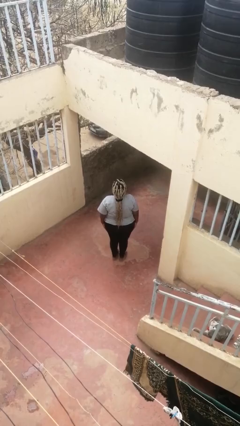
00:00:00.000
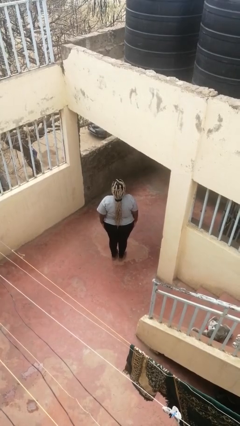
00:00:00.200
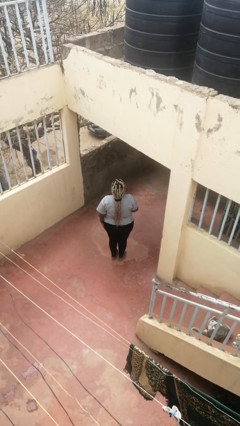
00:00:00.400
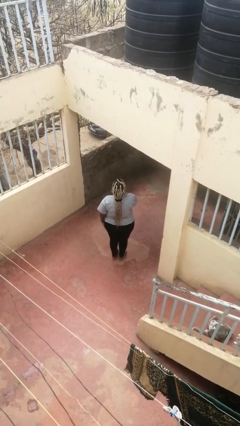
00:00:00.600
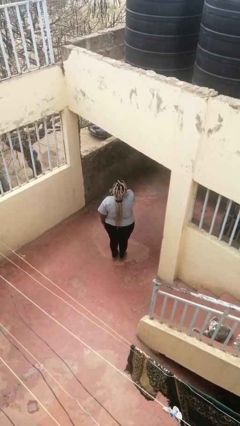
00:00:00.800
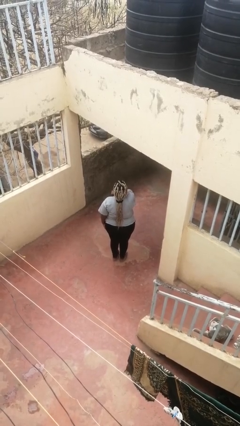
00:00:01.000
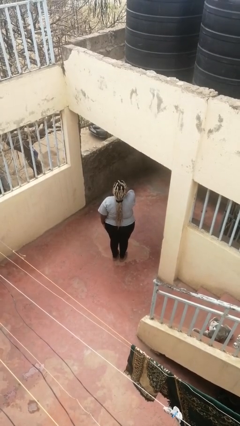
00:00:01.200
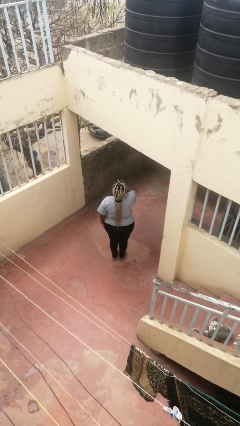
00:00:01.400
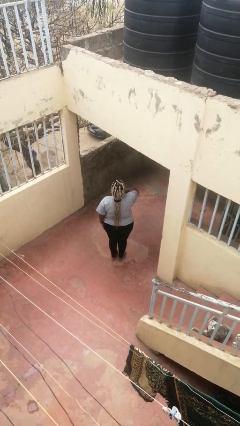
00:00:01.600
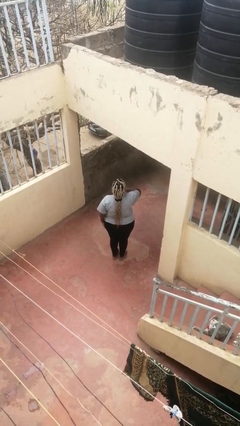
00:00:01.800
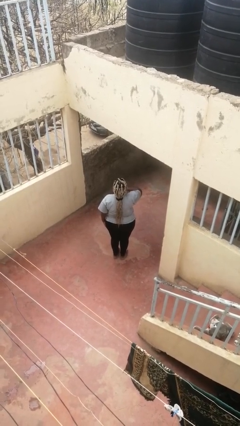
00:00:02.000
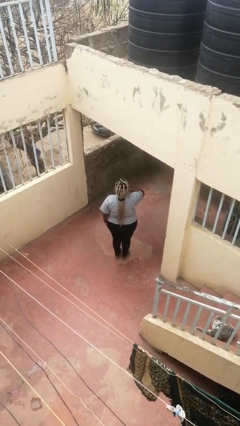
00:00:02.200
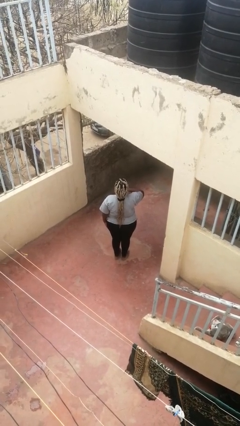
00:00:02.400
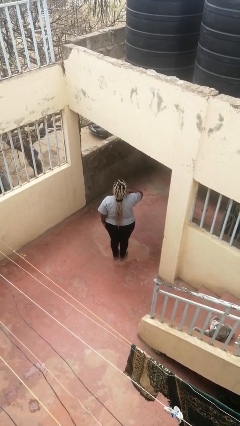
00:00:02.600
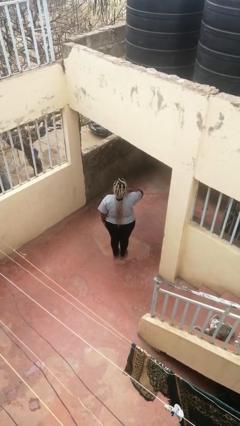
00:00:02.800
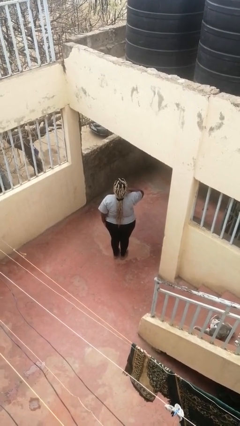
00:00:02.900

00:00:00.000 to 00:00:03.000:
person gestures cut

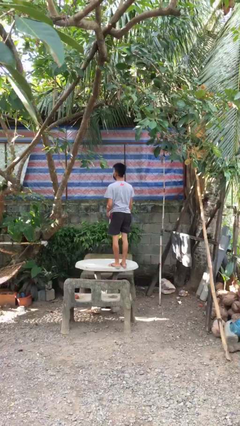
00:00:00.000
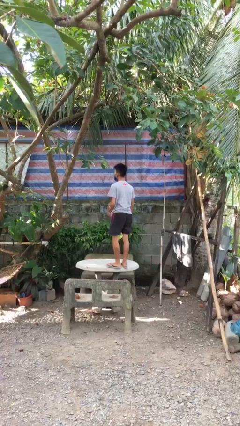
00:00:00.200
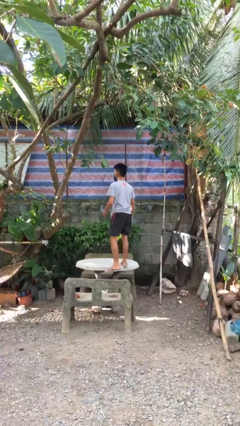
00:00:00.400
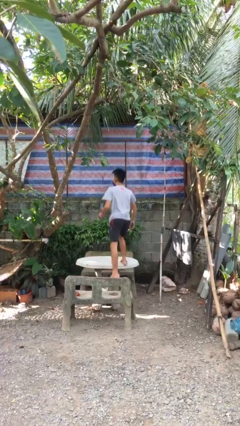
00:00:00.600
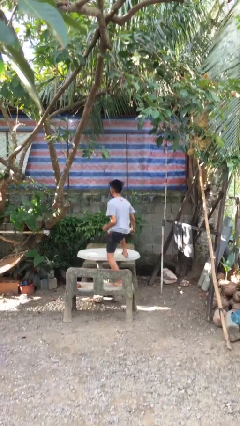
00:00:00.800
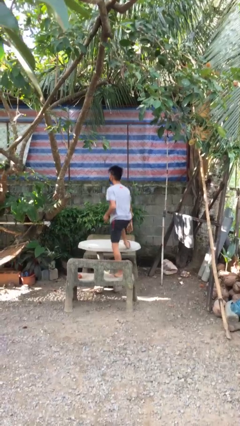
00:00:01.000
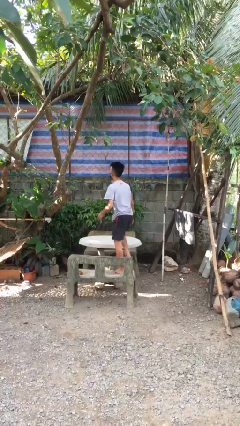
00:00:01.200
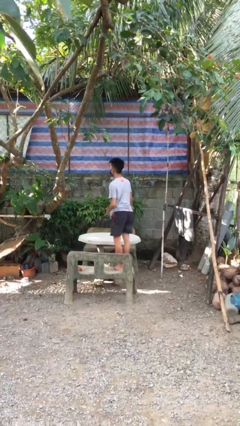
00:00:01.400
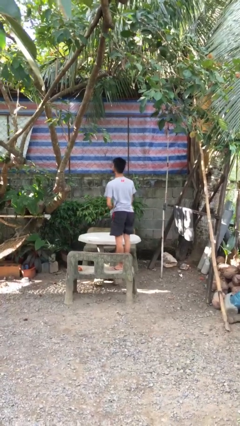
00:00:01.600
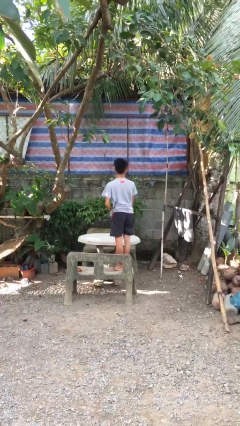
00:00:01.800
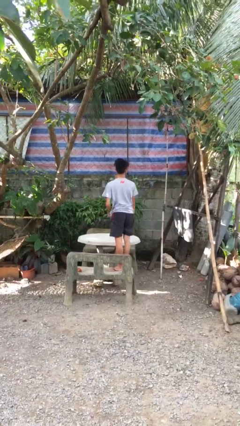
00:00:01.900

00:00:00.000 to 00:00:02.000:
person climbs off table

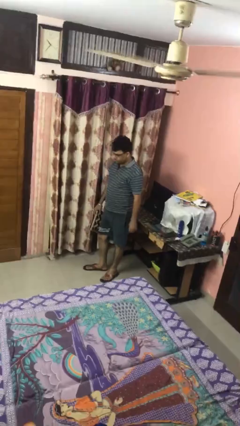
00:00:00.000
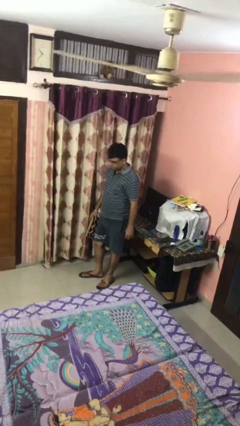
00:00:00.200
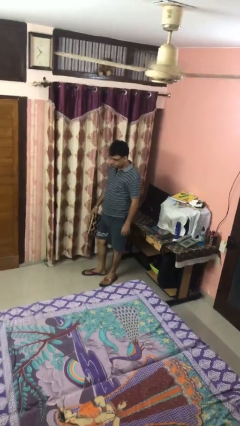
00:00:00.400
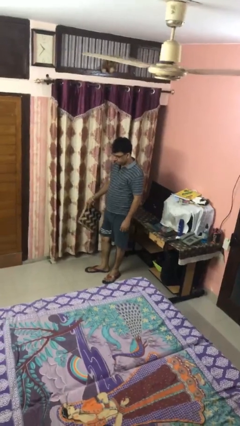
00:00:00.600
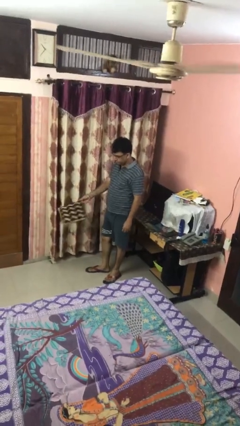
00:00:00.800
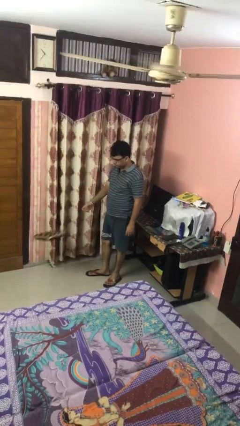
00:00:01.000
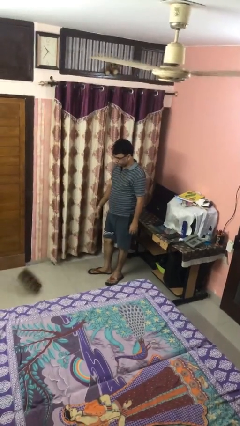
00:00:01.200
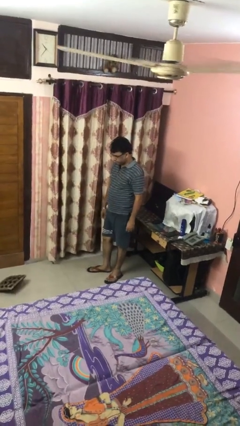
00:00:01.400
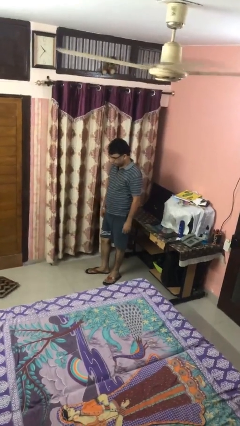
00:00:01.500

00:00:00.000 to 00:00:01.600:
person throws object to ground

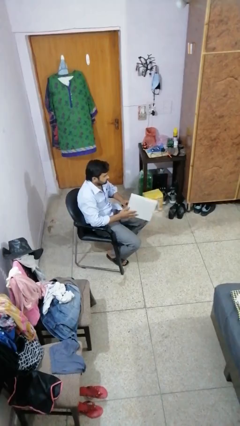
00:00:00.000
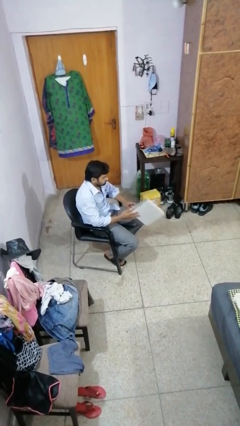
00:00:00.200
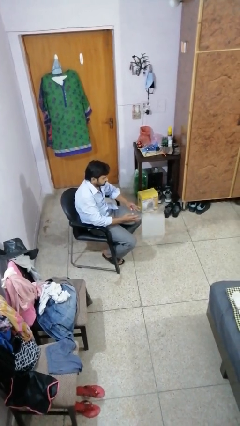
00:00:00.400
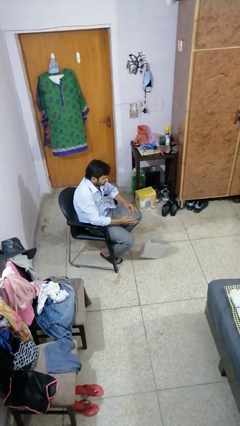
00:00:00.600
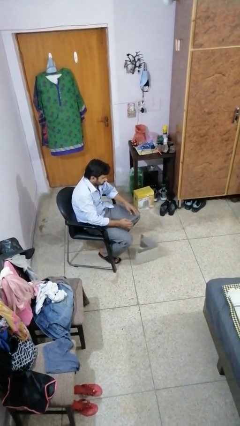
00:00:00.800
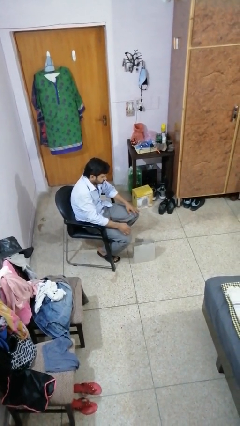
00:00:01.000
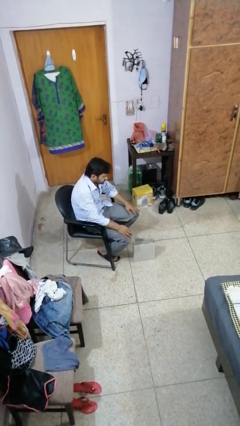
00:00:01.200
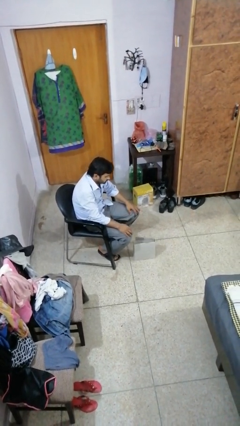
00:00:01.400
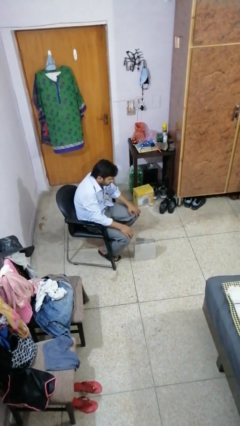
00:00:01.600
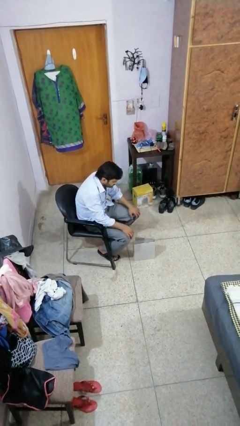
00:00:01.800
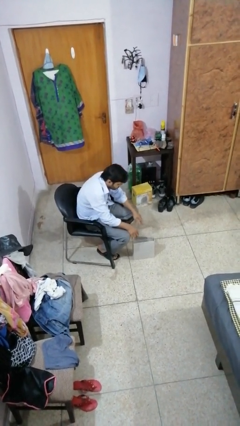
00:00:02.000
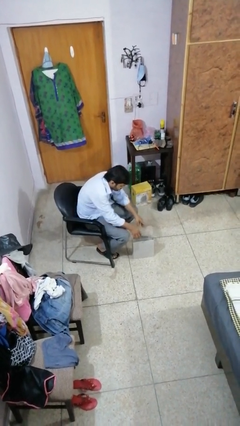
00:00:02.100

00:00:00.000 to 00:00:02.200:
person drops object

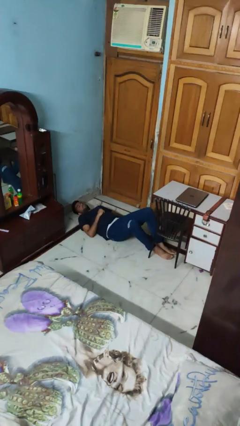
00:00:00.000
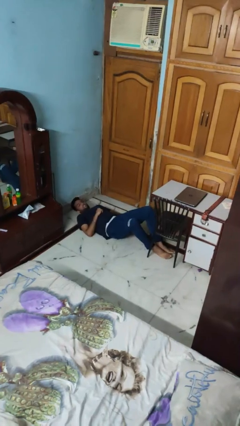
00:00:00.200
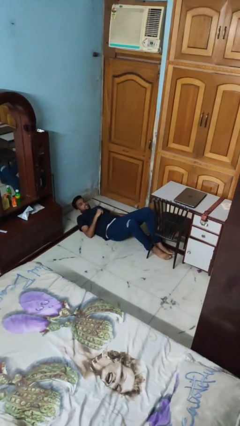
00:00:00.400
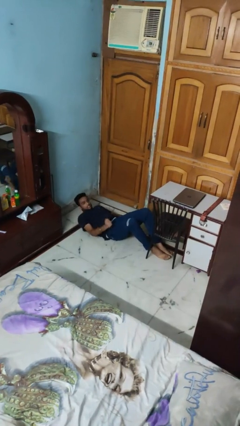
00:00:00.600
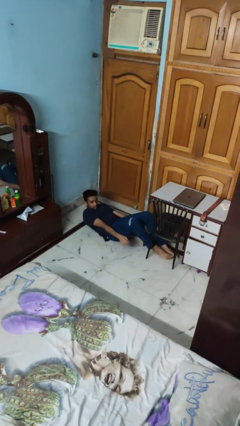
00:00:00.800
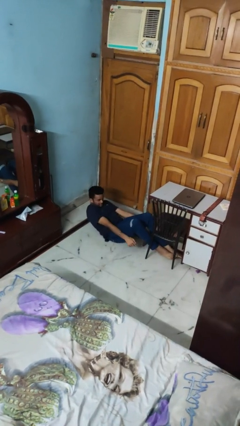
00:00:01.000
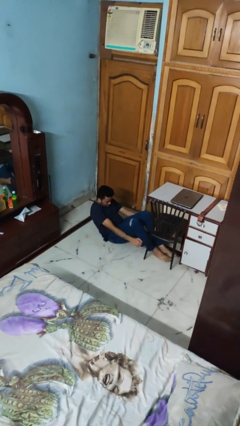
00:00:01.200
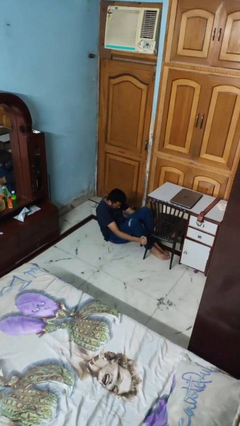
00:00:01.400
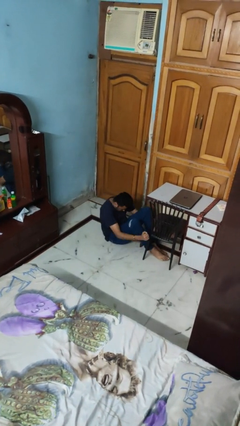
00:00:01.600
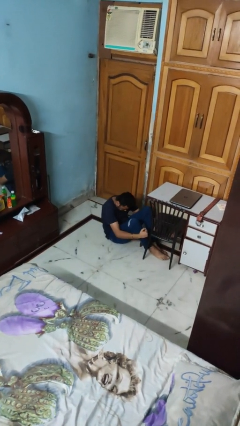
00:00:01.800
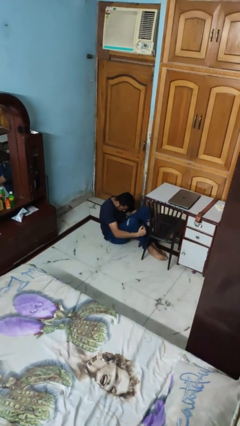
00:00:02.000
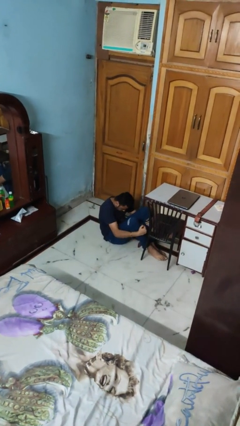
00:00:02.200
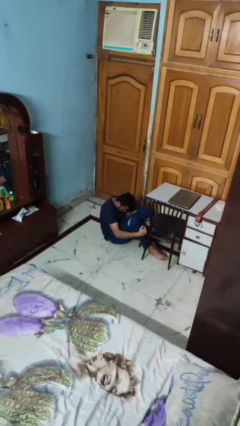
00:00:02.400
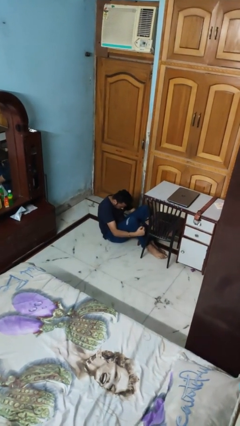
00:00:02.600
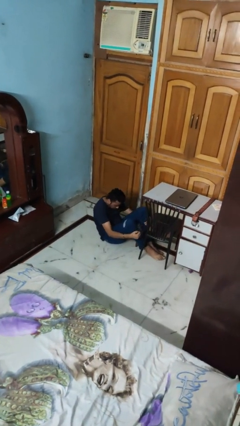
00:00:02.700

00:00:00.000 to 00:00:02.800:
person exercises with situp

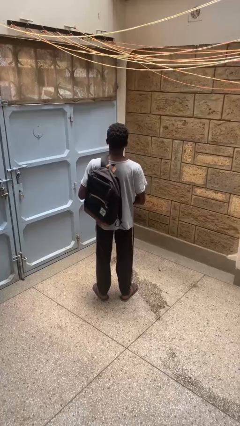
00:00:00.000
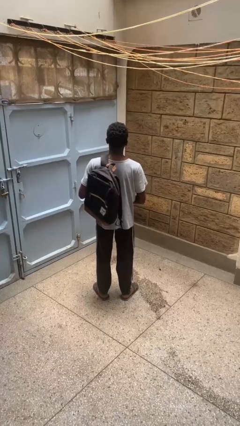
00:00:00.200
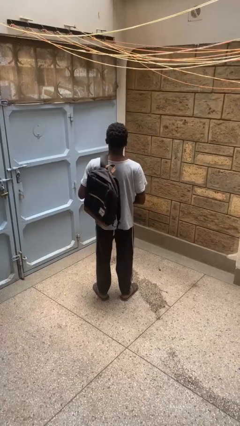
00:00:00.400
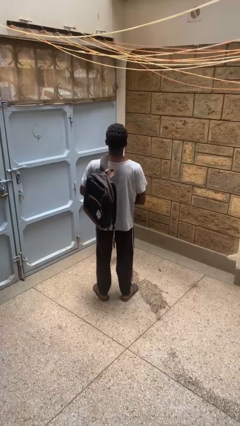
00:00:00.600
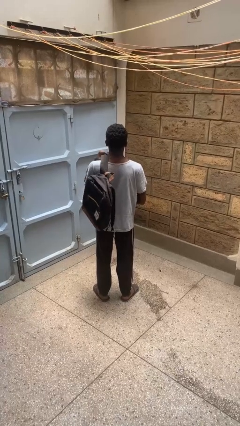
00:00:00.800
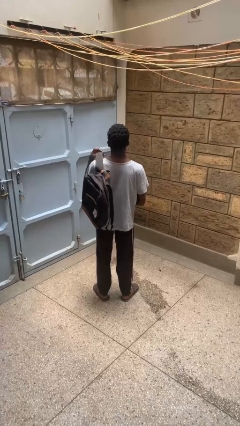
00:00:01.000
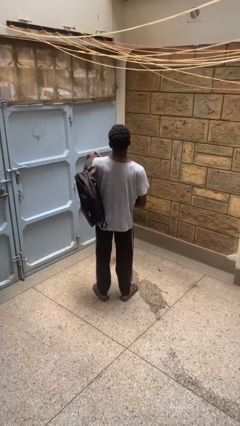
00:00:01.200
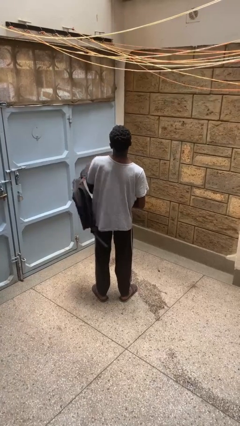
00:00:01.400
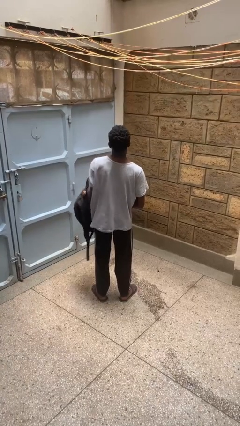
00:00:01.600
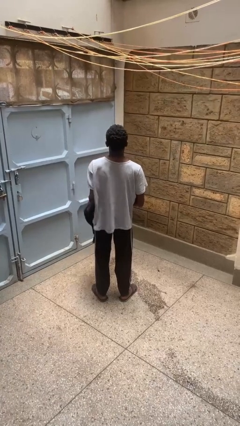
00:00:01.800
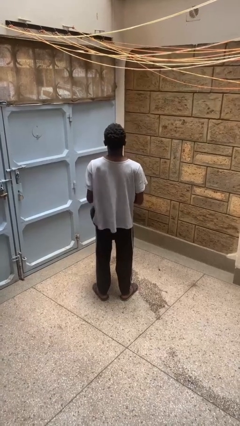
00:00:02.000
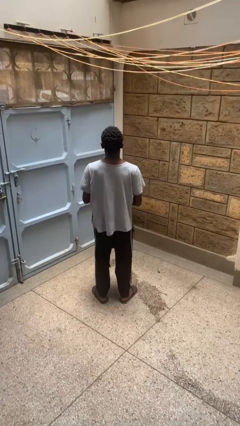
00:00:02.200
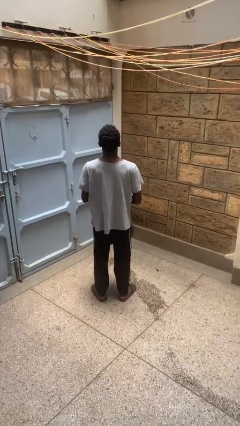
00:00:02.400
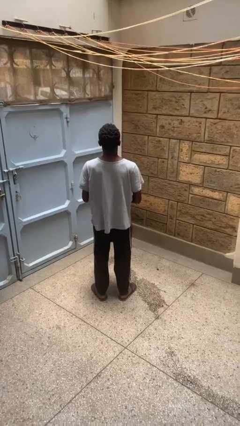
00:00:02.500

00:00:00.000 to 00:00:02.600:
person takes off backpack

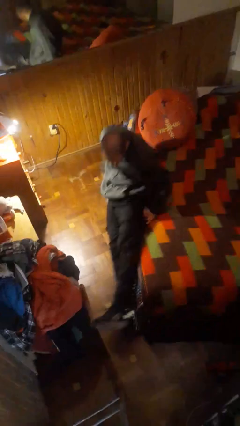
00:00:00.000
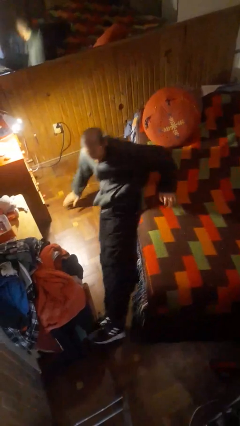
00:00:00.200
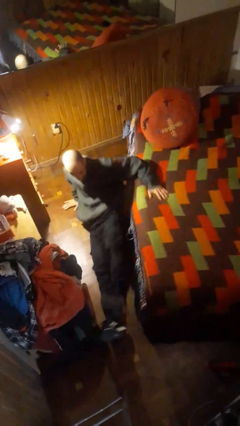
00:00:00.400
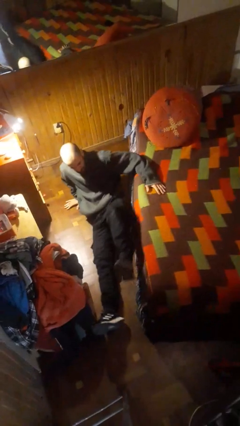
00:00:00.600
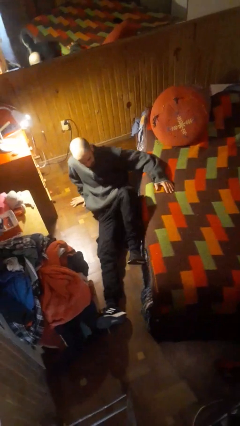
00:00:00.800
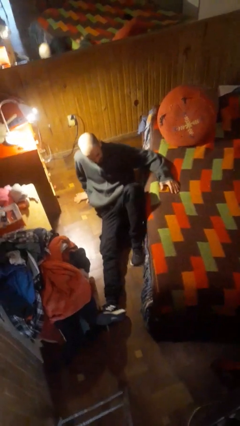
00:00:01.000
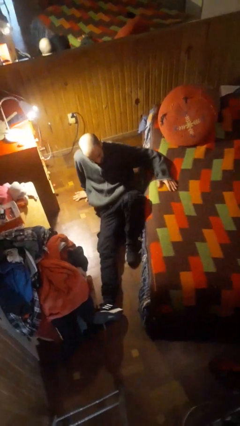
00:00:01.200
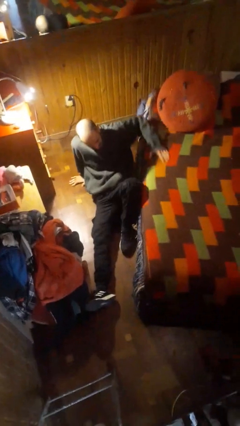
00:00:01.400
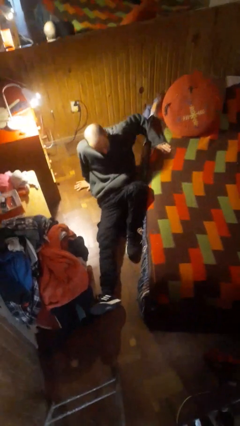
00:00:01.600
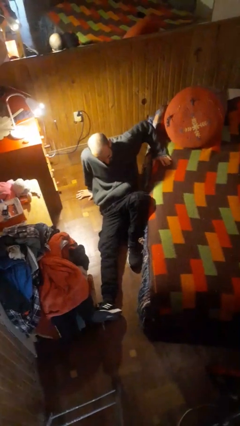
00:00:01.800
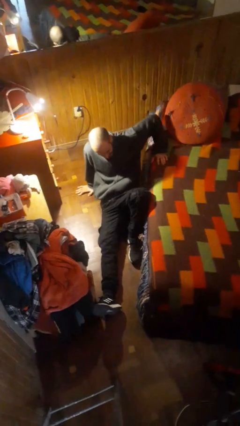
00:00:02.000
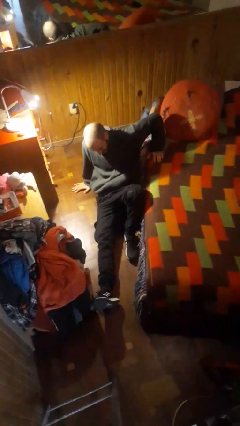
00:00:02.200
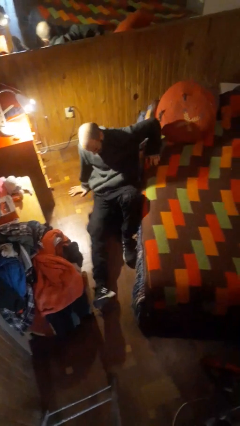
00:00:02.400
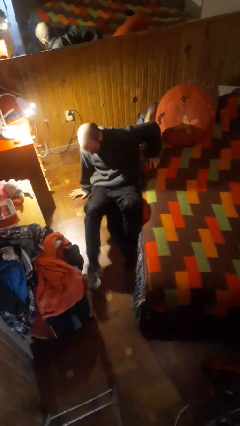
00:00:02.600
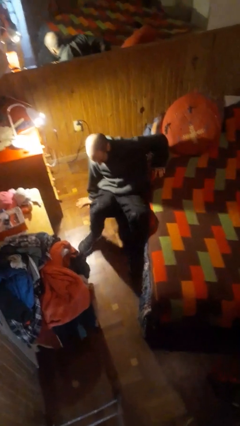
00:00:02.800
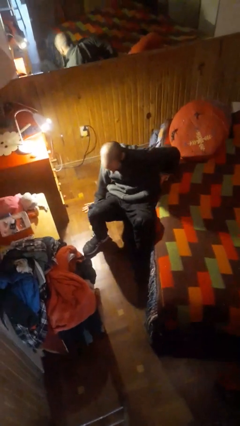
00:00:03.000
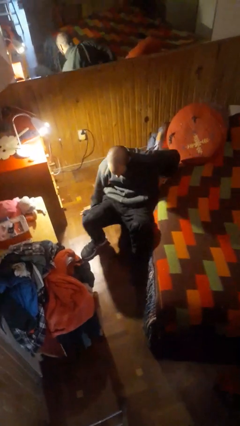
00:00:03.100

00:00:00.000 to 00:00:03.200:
person falls from bed
